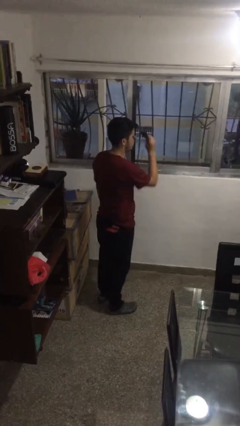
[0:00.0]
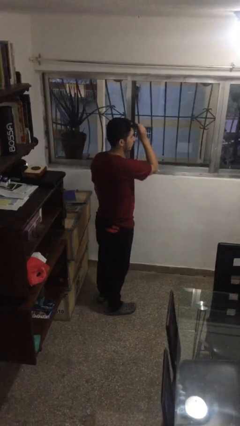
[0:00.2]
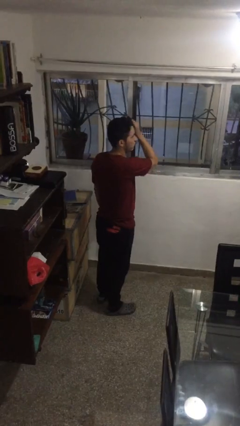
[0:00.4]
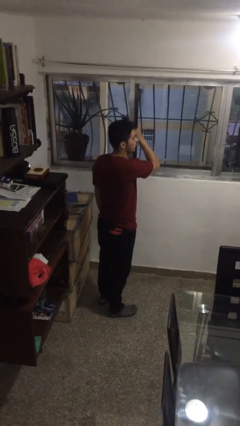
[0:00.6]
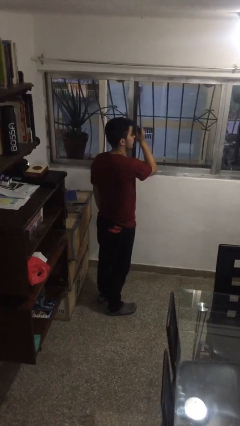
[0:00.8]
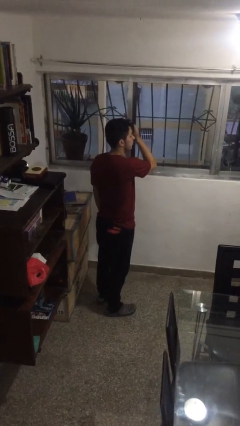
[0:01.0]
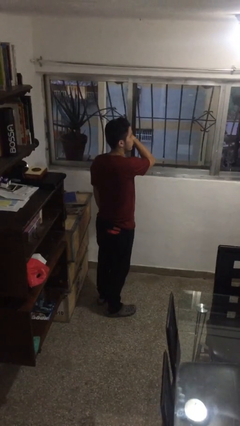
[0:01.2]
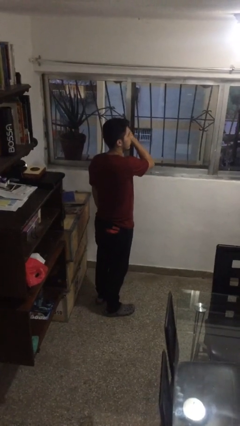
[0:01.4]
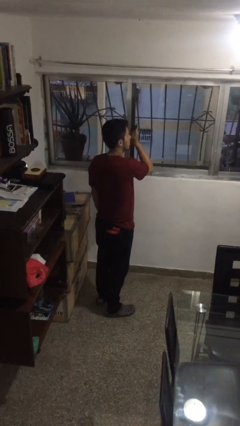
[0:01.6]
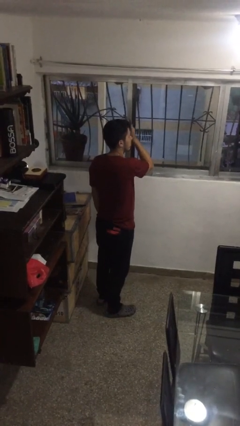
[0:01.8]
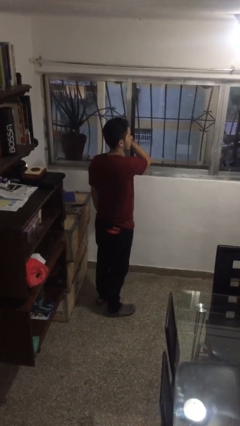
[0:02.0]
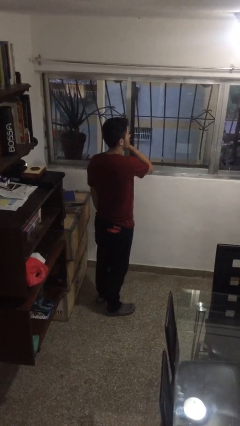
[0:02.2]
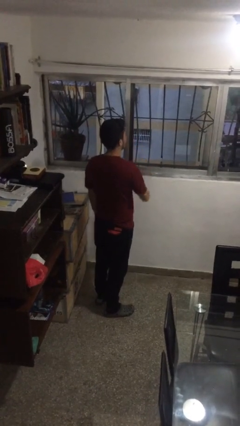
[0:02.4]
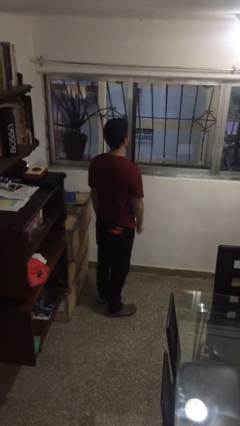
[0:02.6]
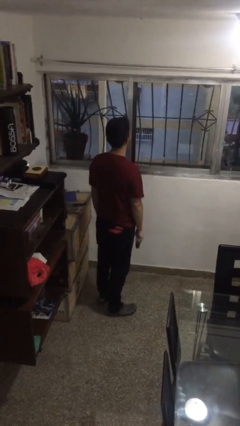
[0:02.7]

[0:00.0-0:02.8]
person brushes hair
